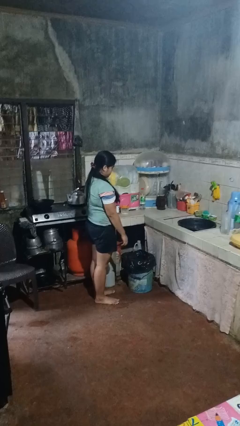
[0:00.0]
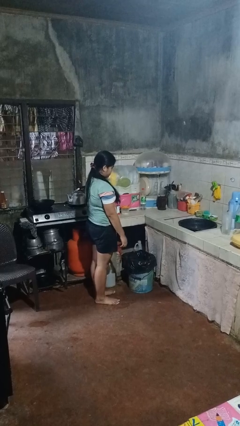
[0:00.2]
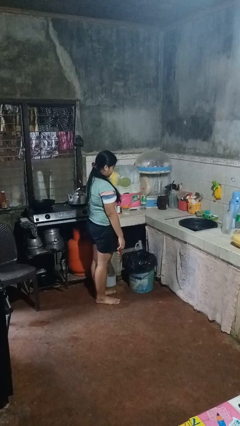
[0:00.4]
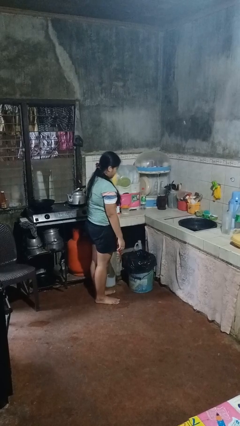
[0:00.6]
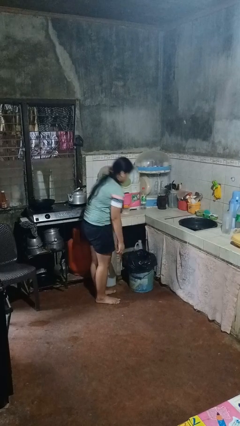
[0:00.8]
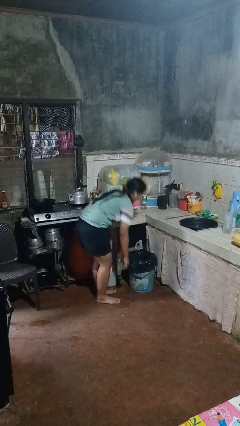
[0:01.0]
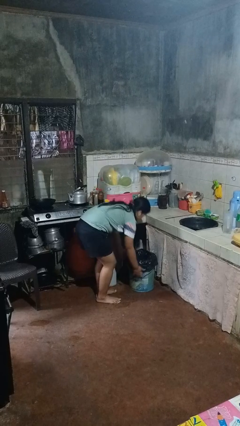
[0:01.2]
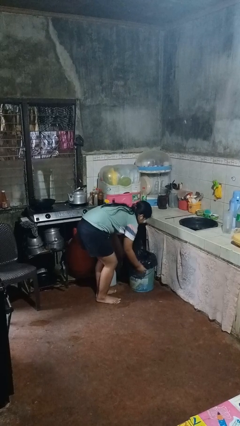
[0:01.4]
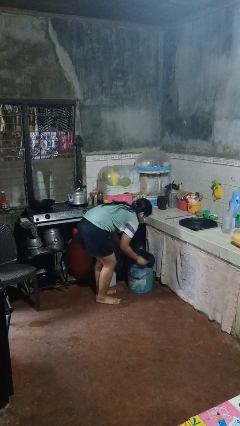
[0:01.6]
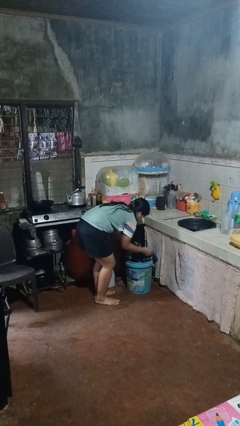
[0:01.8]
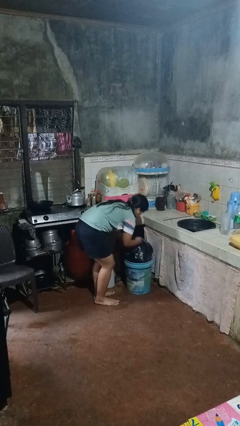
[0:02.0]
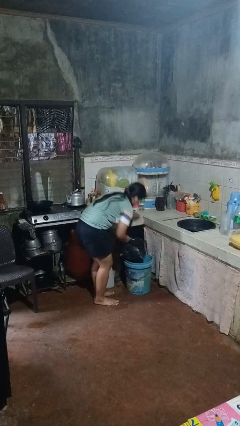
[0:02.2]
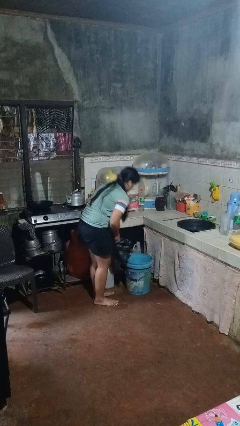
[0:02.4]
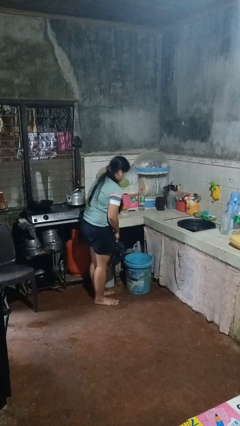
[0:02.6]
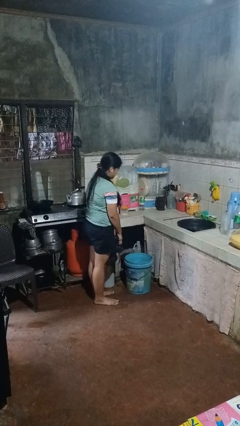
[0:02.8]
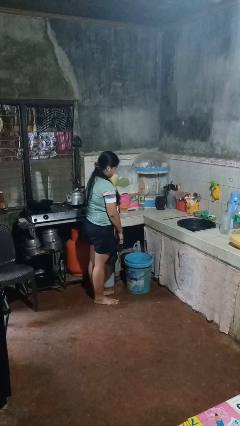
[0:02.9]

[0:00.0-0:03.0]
person removes trashbag from trashcan

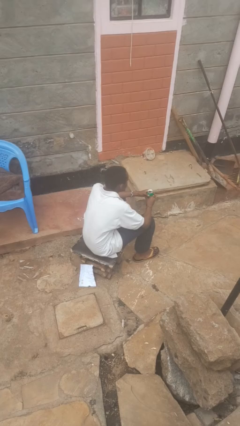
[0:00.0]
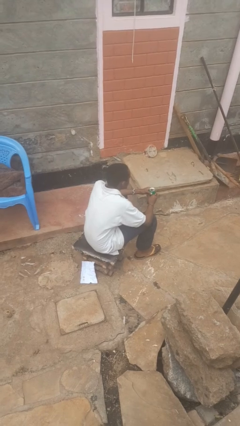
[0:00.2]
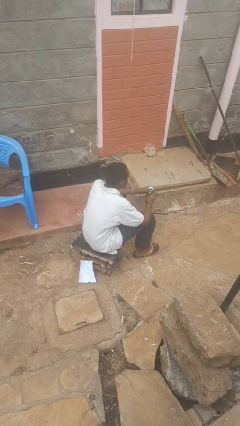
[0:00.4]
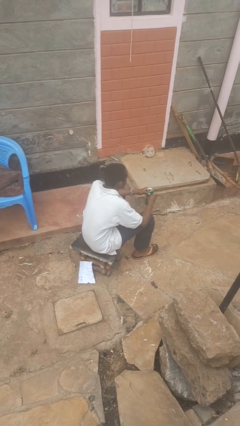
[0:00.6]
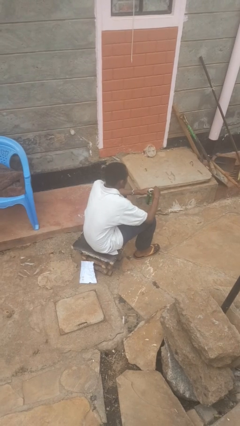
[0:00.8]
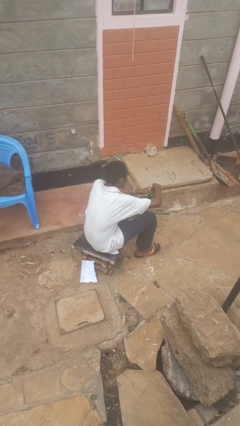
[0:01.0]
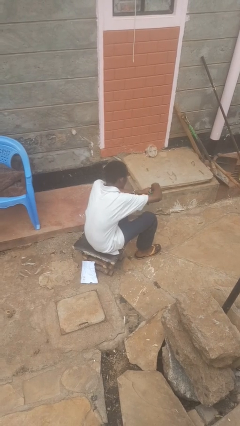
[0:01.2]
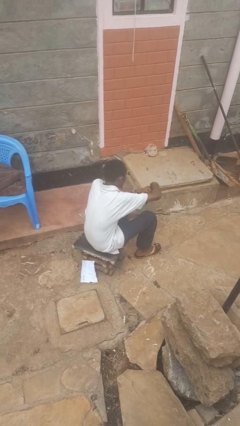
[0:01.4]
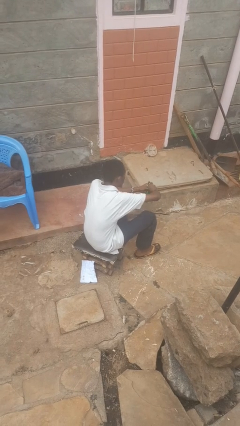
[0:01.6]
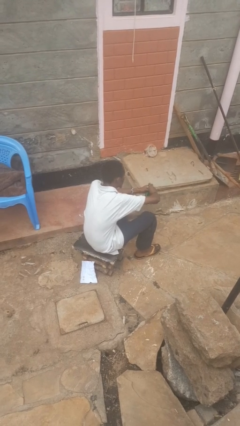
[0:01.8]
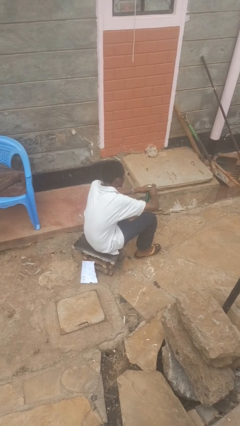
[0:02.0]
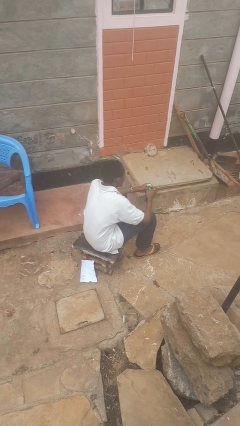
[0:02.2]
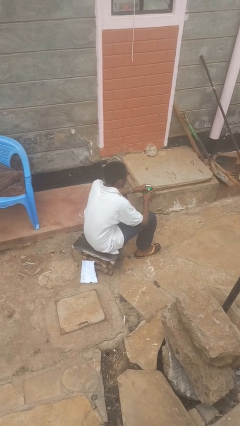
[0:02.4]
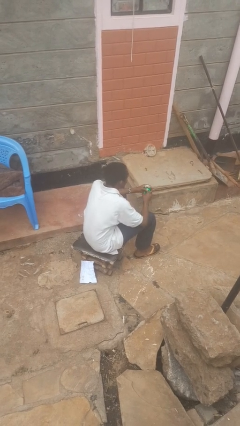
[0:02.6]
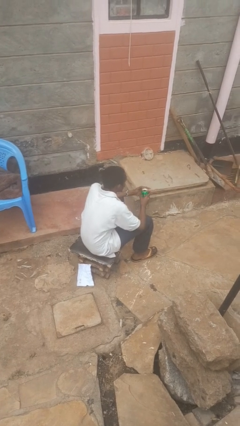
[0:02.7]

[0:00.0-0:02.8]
person opens beverage can

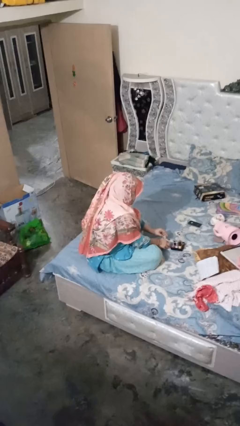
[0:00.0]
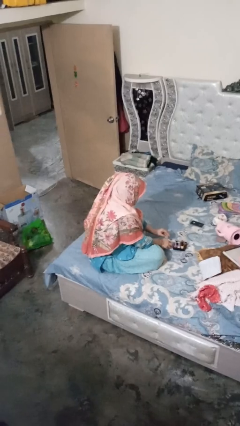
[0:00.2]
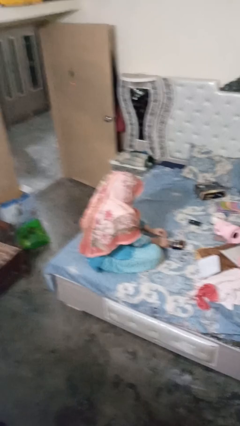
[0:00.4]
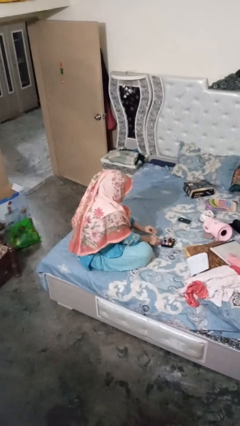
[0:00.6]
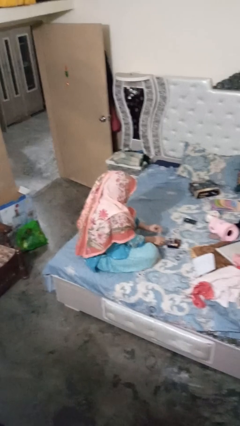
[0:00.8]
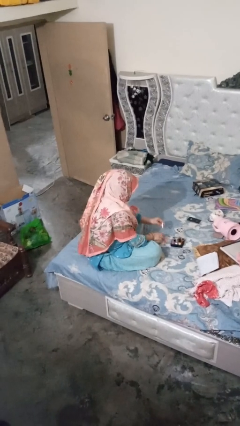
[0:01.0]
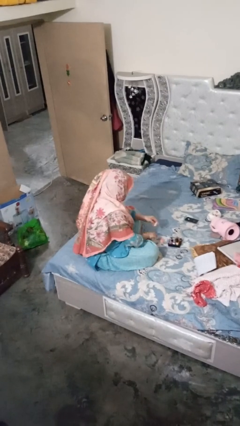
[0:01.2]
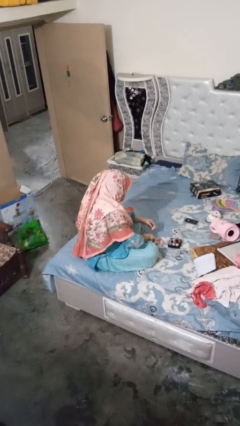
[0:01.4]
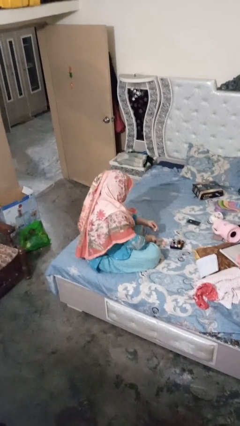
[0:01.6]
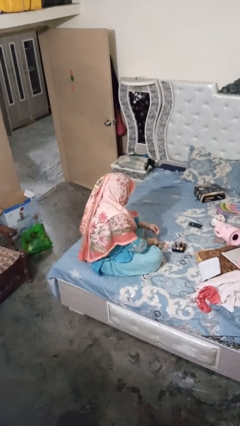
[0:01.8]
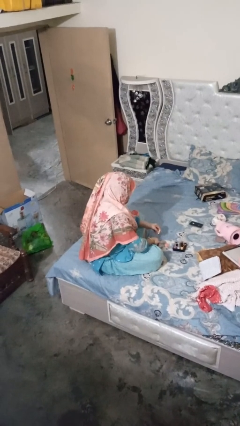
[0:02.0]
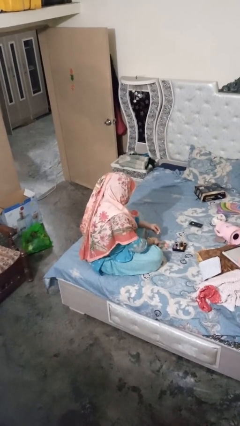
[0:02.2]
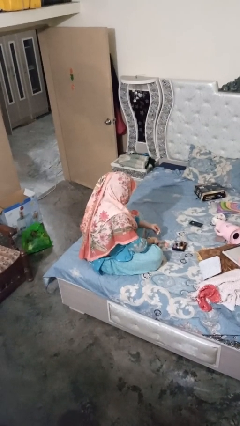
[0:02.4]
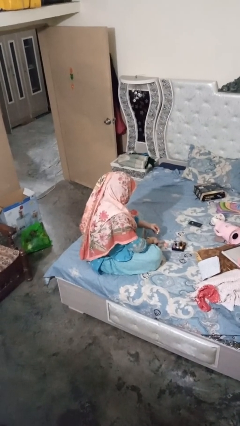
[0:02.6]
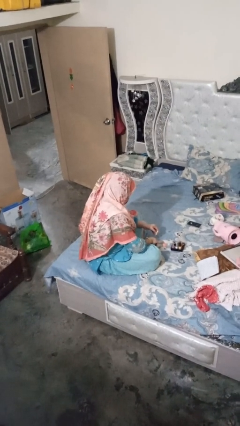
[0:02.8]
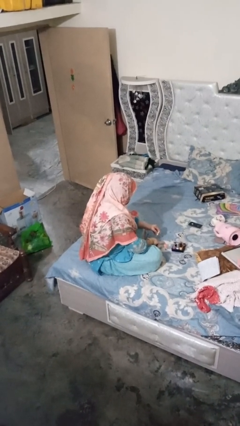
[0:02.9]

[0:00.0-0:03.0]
person paints fingernails

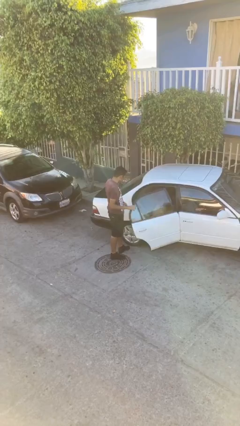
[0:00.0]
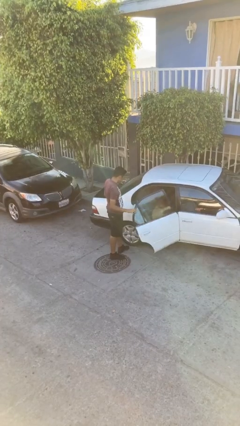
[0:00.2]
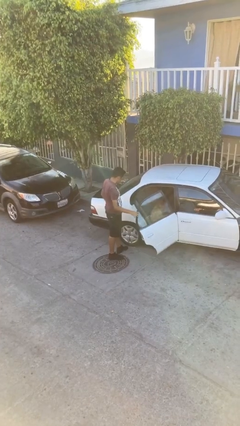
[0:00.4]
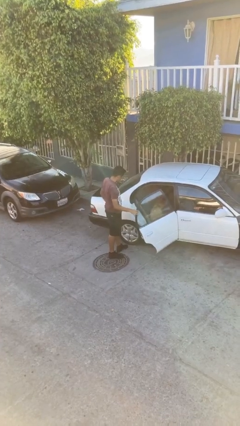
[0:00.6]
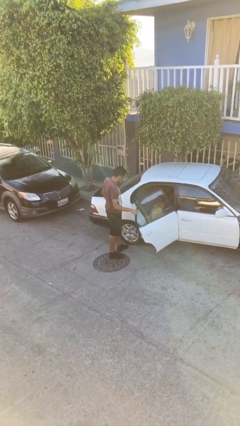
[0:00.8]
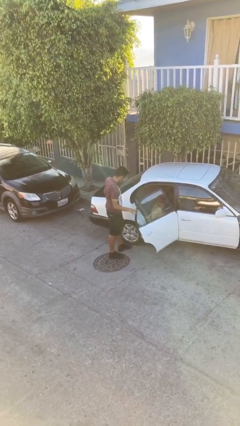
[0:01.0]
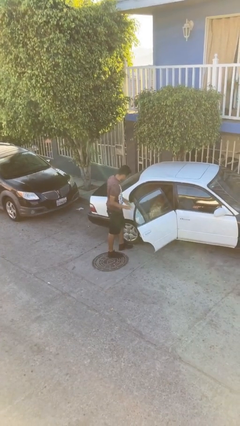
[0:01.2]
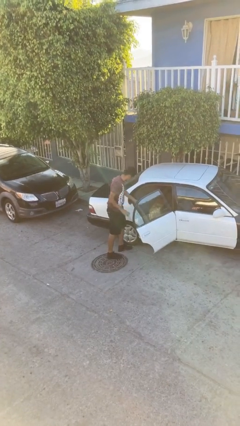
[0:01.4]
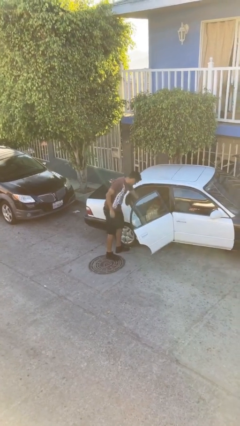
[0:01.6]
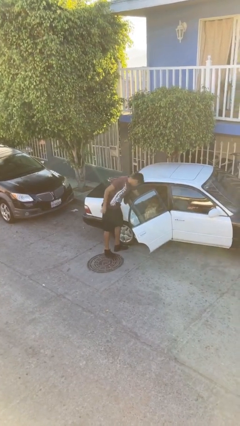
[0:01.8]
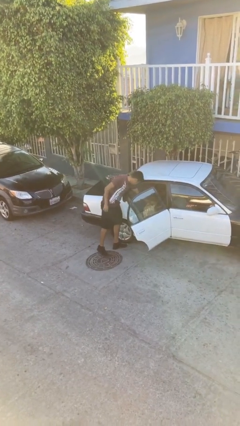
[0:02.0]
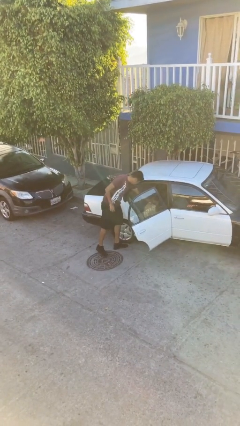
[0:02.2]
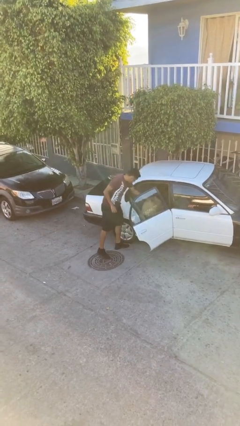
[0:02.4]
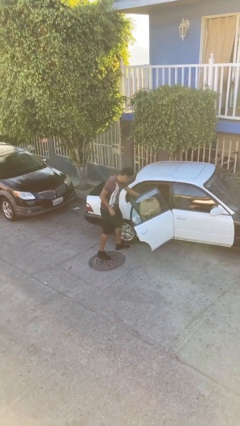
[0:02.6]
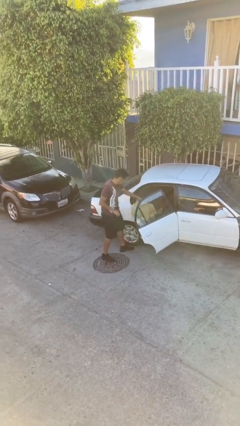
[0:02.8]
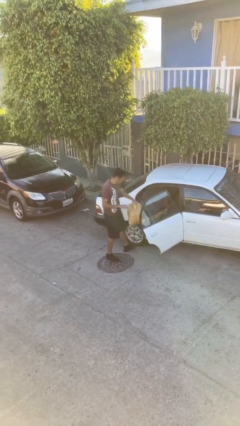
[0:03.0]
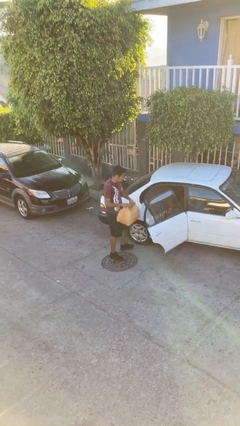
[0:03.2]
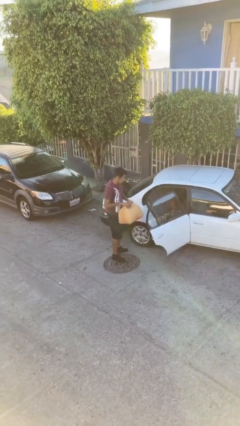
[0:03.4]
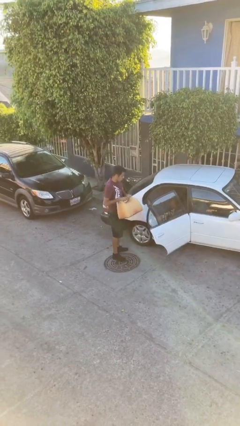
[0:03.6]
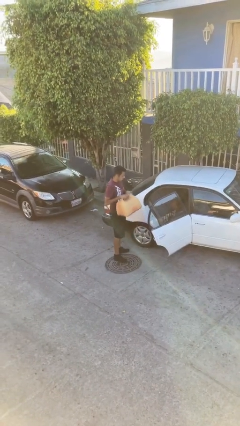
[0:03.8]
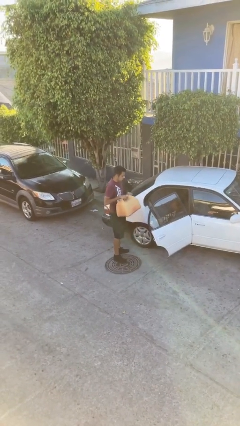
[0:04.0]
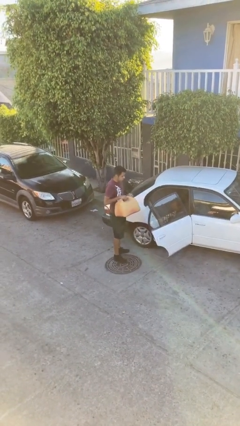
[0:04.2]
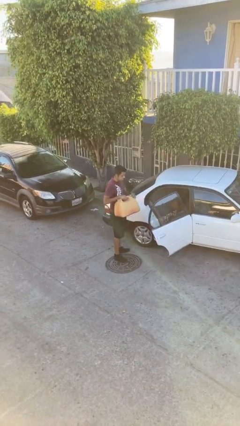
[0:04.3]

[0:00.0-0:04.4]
person unloads car

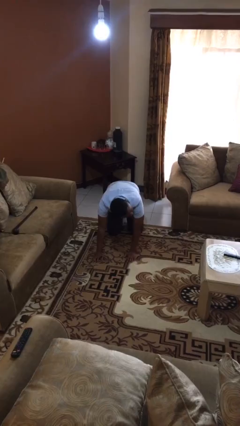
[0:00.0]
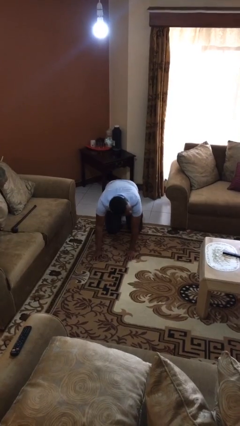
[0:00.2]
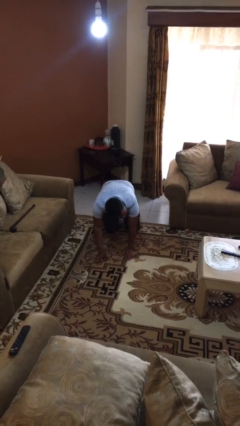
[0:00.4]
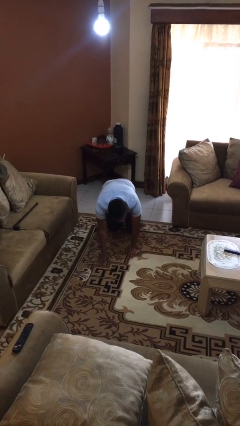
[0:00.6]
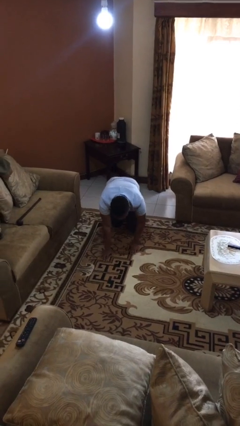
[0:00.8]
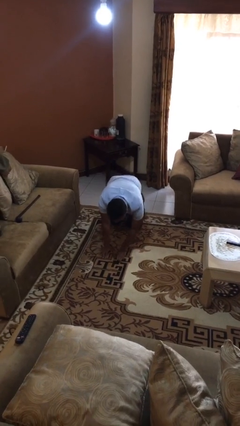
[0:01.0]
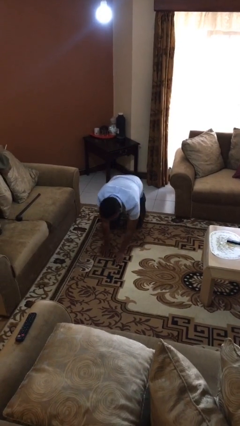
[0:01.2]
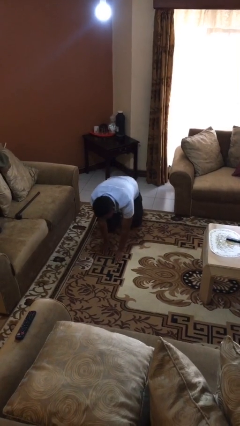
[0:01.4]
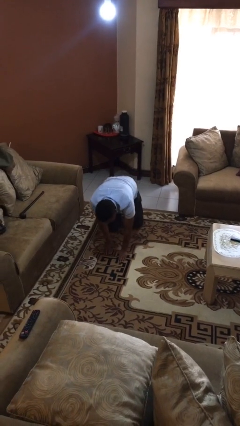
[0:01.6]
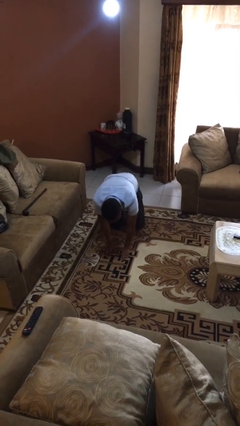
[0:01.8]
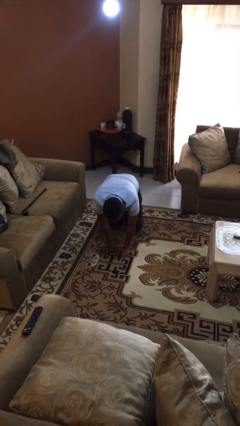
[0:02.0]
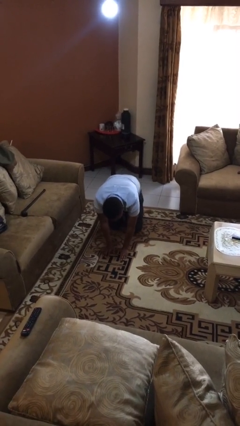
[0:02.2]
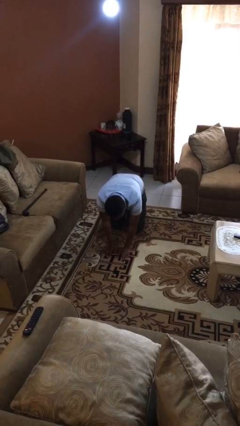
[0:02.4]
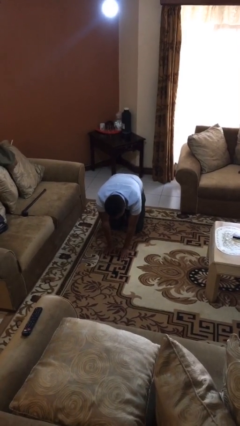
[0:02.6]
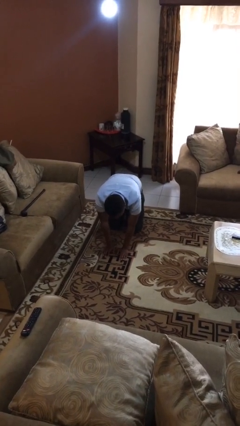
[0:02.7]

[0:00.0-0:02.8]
person crawls

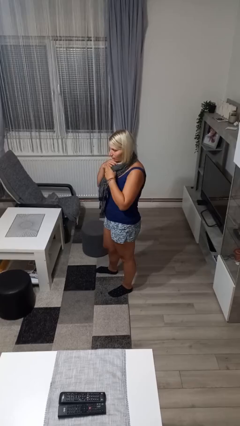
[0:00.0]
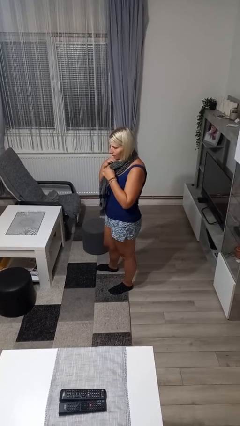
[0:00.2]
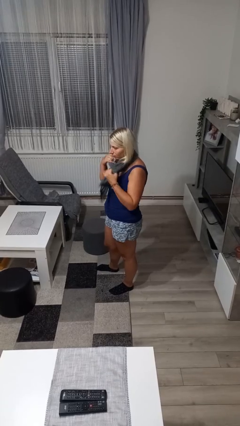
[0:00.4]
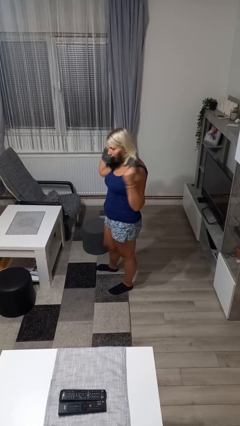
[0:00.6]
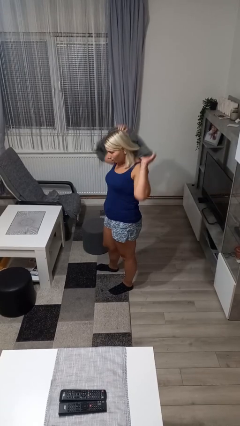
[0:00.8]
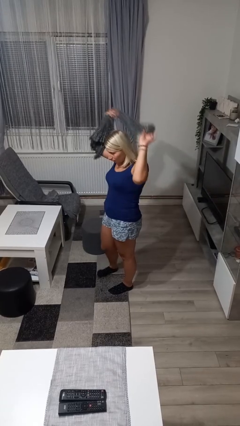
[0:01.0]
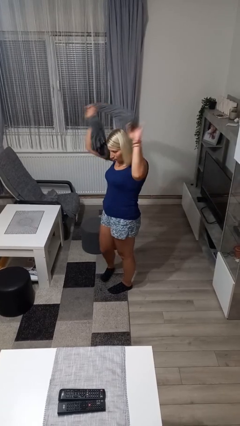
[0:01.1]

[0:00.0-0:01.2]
person takes off scarf
